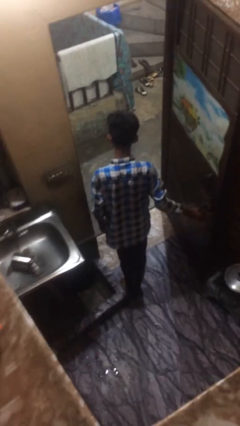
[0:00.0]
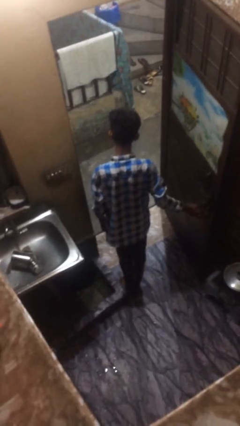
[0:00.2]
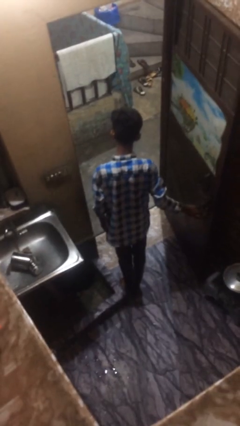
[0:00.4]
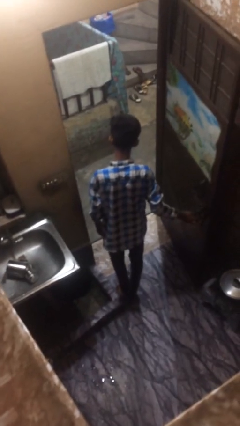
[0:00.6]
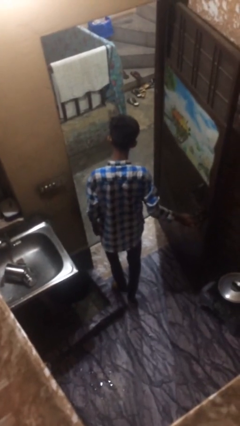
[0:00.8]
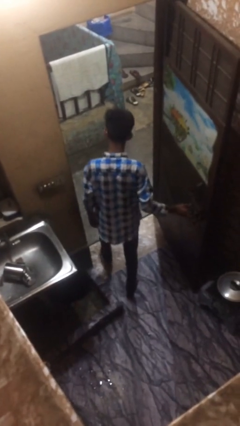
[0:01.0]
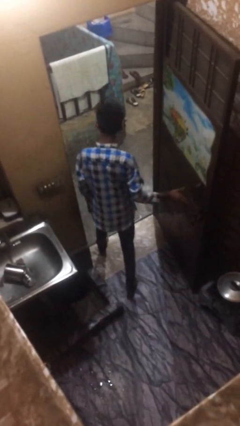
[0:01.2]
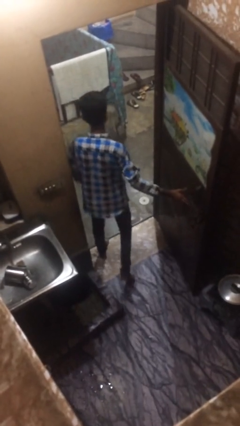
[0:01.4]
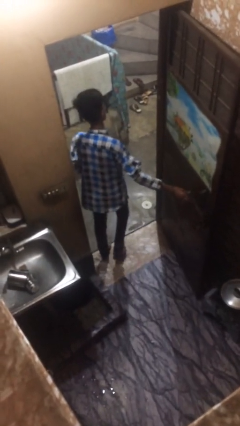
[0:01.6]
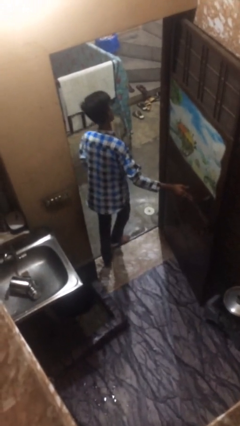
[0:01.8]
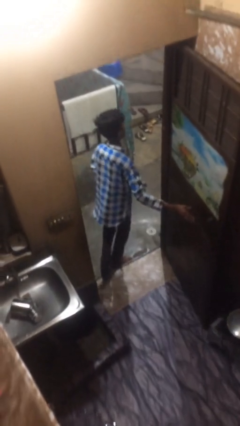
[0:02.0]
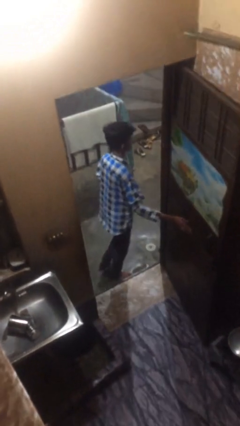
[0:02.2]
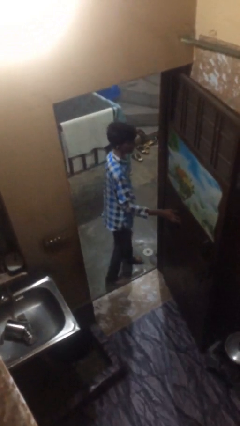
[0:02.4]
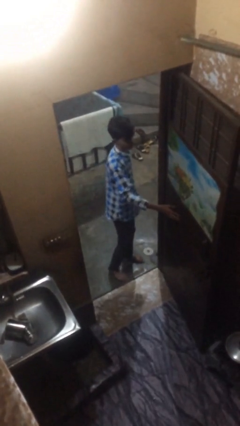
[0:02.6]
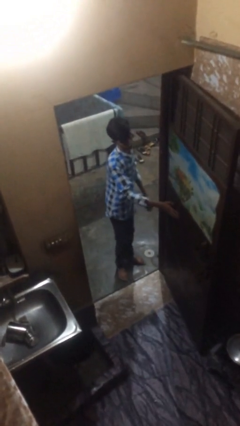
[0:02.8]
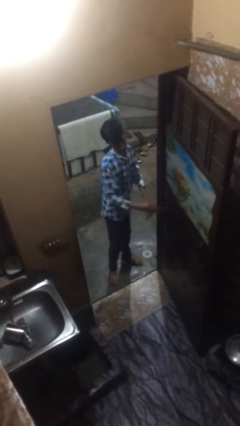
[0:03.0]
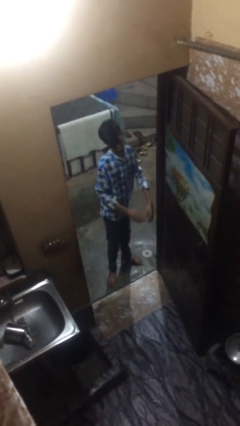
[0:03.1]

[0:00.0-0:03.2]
person exits scene through structure

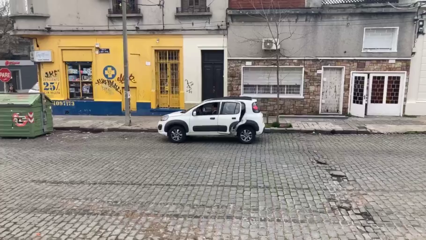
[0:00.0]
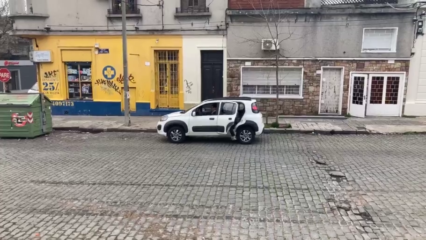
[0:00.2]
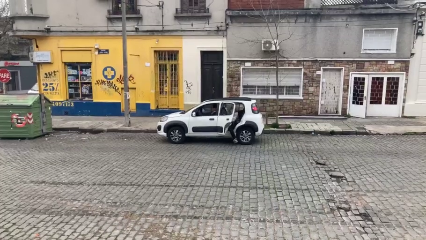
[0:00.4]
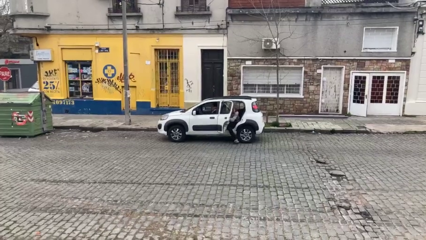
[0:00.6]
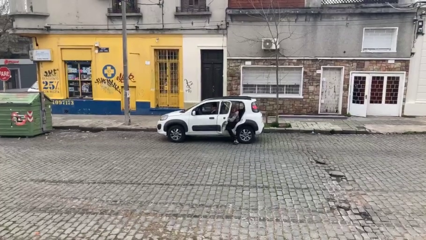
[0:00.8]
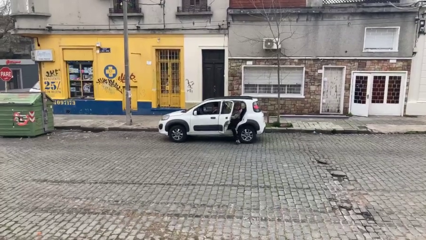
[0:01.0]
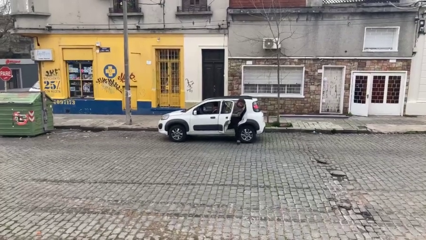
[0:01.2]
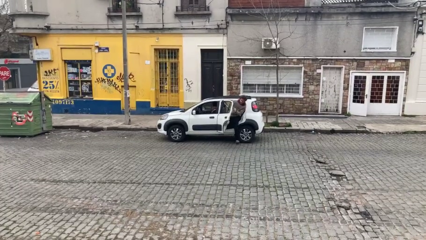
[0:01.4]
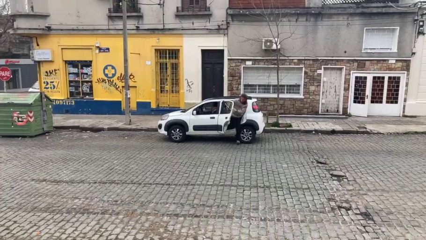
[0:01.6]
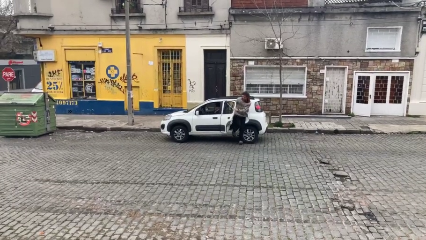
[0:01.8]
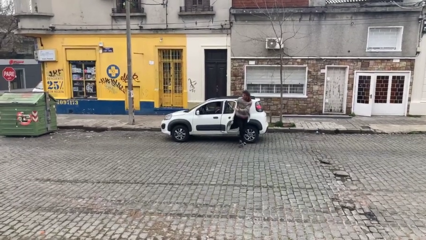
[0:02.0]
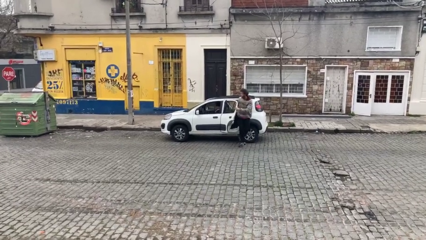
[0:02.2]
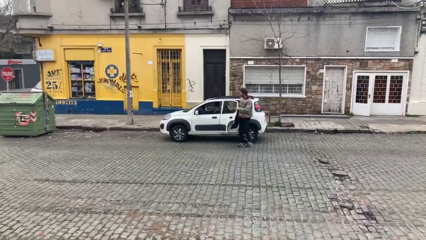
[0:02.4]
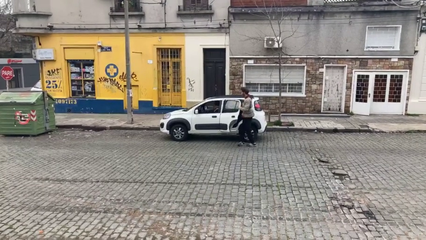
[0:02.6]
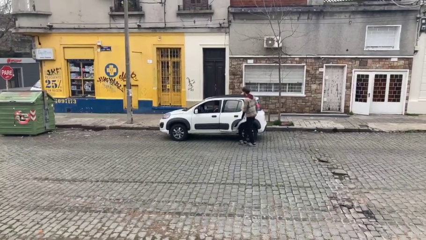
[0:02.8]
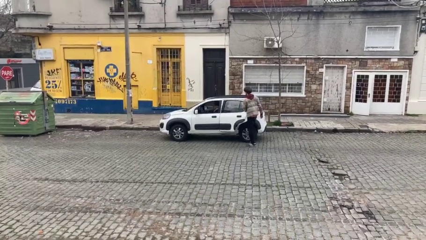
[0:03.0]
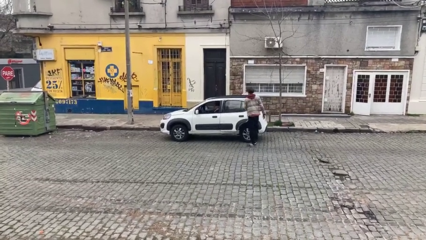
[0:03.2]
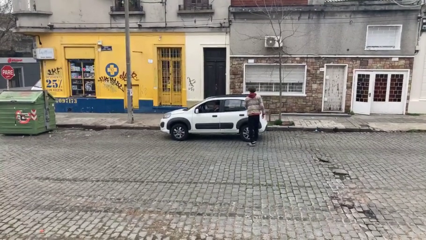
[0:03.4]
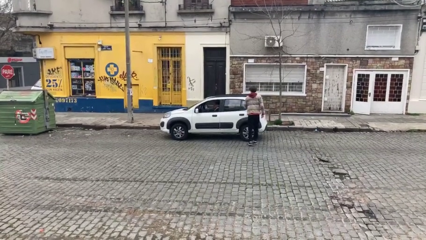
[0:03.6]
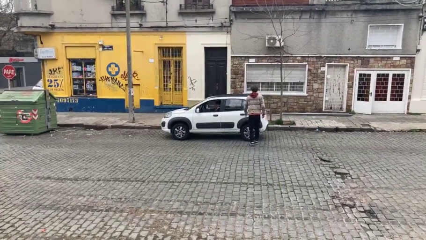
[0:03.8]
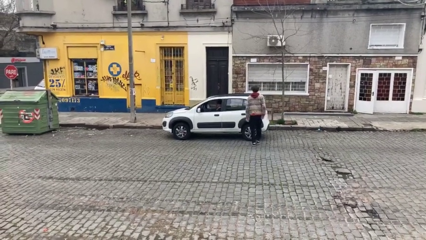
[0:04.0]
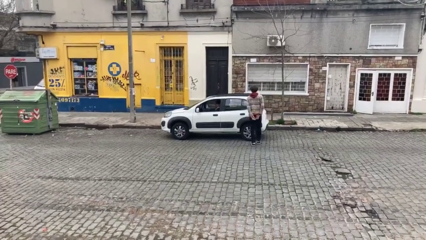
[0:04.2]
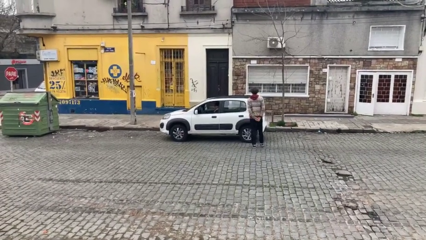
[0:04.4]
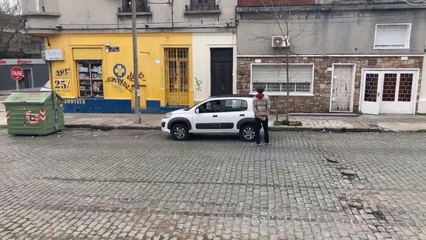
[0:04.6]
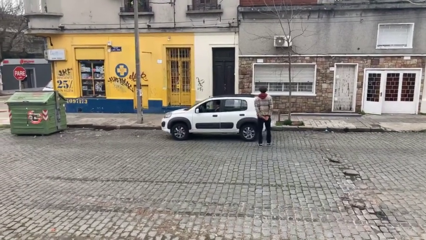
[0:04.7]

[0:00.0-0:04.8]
car drops off person

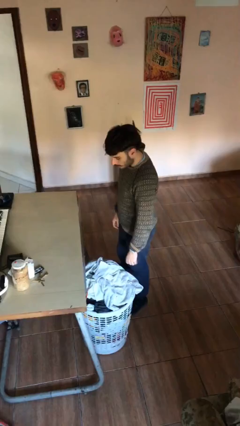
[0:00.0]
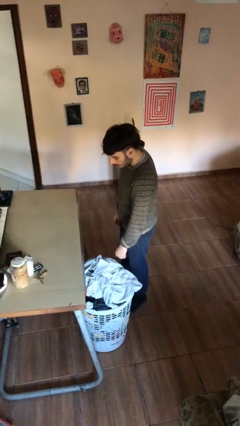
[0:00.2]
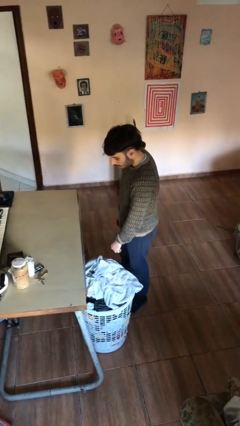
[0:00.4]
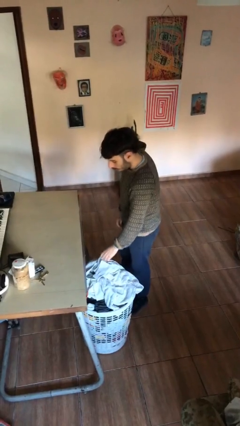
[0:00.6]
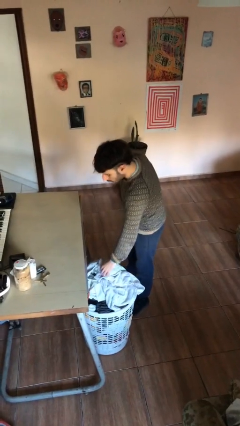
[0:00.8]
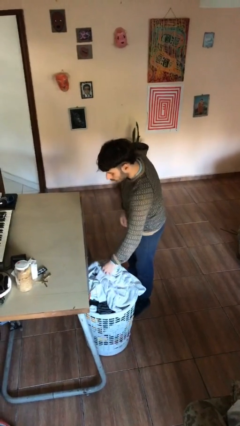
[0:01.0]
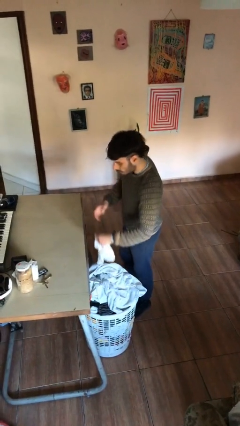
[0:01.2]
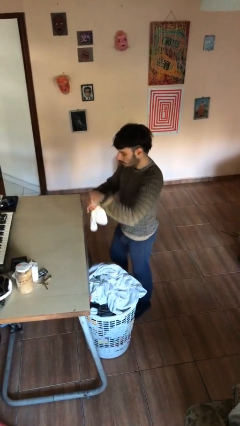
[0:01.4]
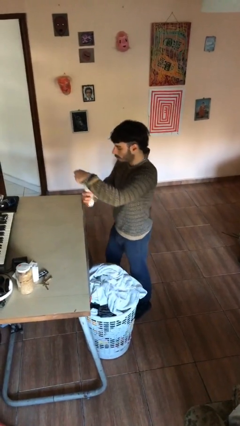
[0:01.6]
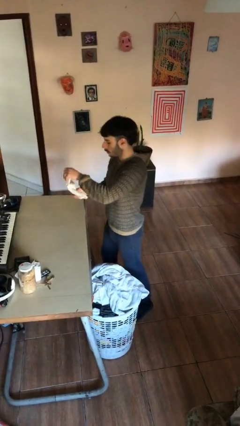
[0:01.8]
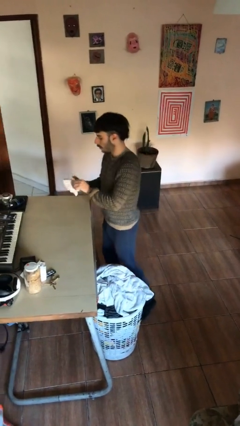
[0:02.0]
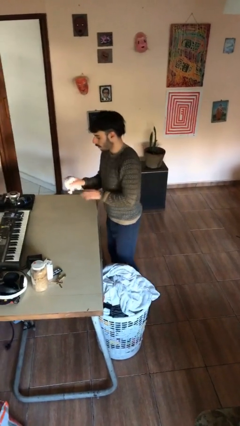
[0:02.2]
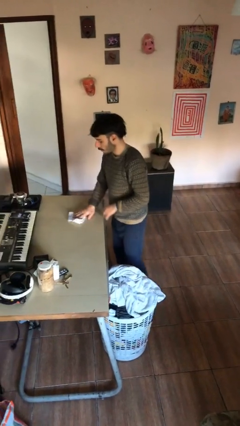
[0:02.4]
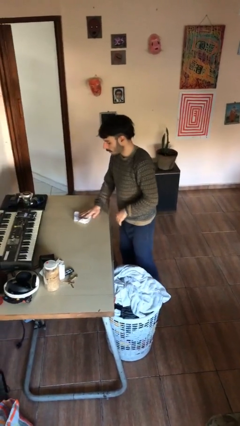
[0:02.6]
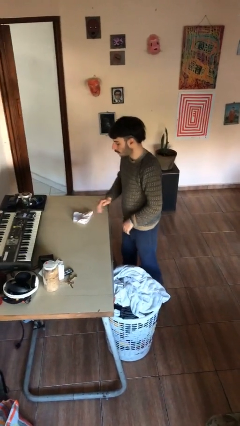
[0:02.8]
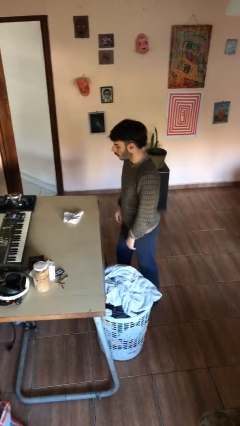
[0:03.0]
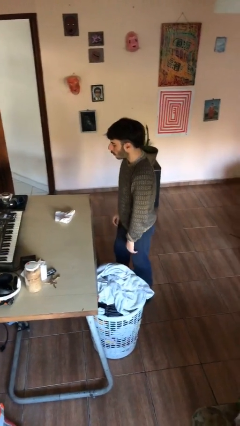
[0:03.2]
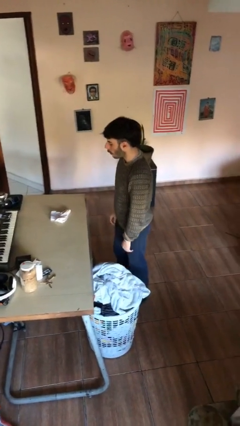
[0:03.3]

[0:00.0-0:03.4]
person folds socks

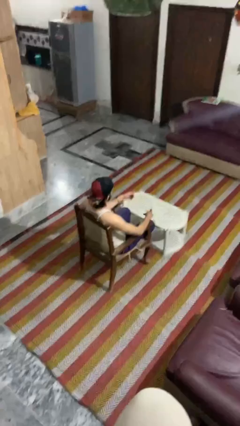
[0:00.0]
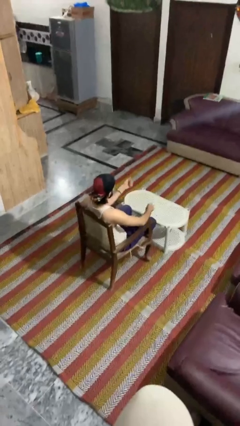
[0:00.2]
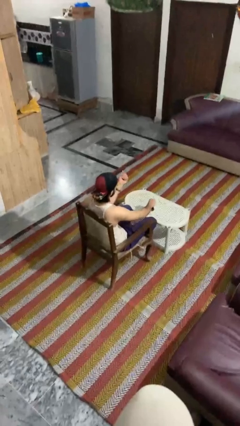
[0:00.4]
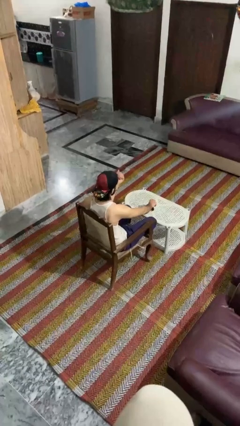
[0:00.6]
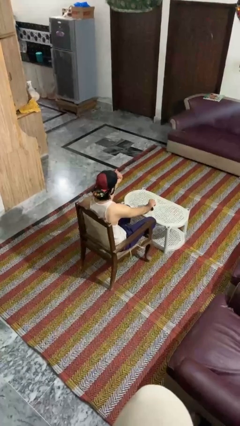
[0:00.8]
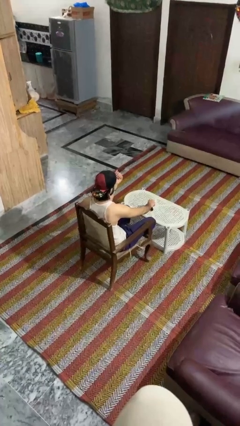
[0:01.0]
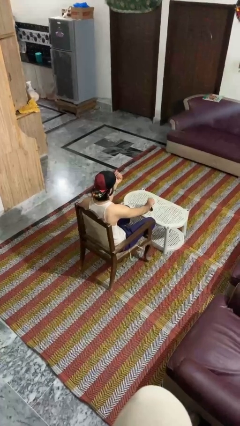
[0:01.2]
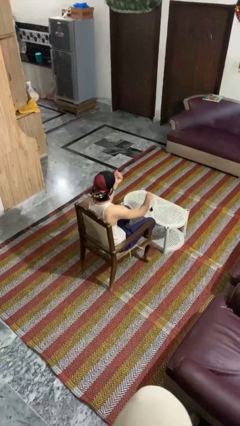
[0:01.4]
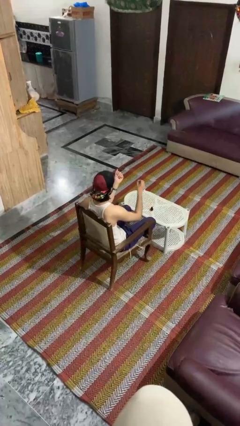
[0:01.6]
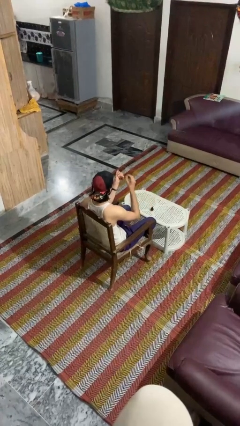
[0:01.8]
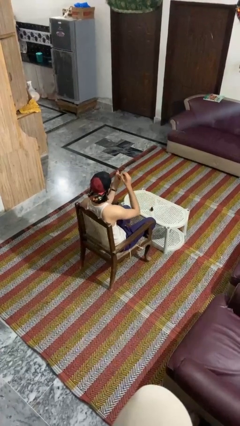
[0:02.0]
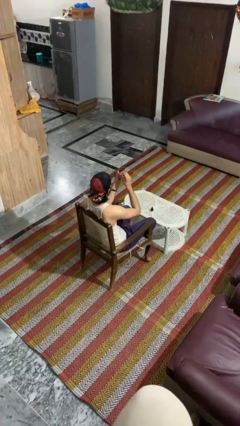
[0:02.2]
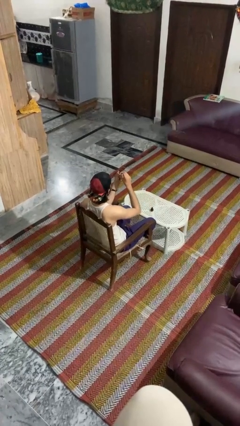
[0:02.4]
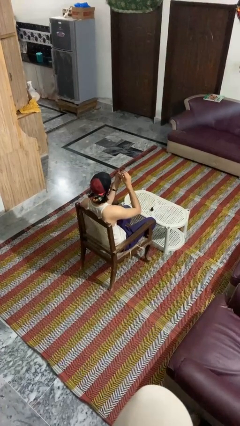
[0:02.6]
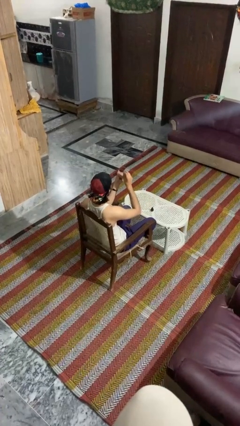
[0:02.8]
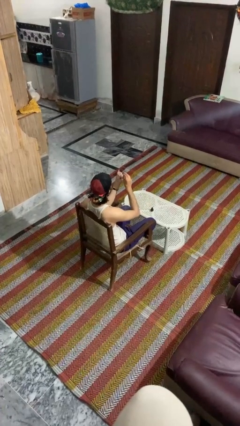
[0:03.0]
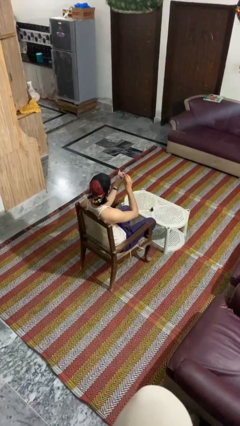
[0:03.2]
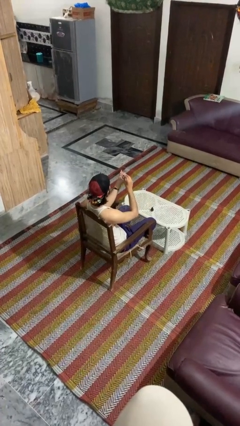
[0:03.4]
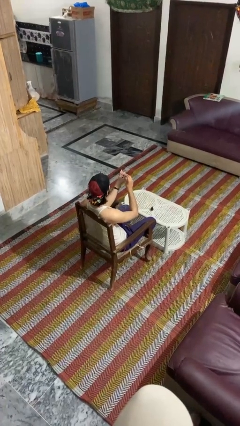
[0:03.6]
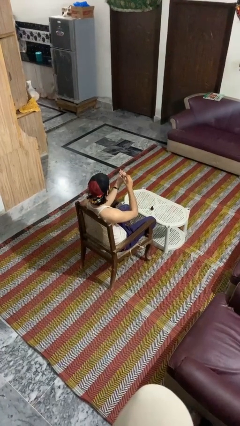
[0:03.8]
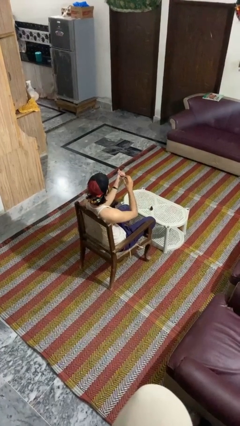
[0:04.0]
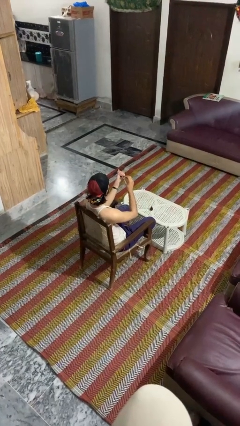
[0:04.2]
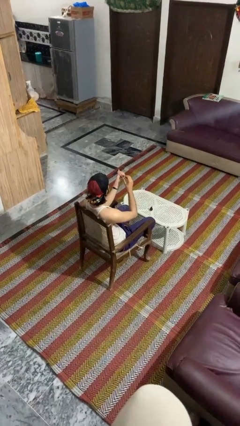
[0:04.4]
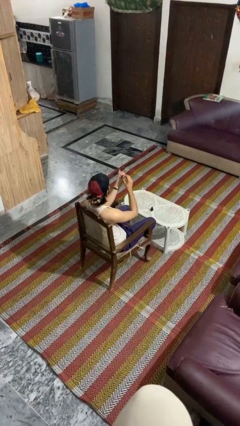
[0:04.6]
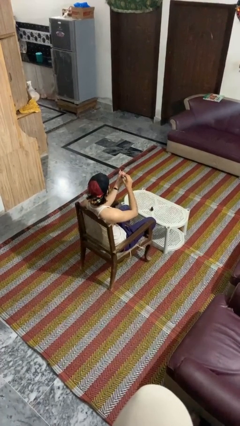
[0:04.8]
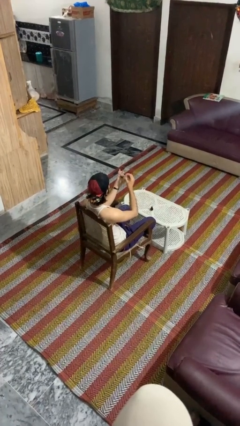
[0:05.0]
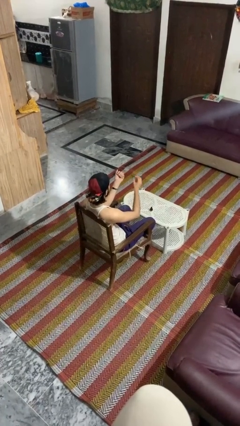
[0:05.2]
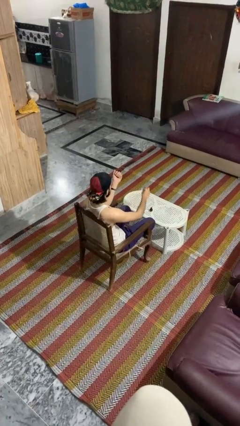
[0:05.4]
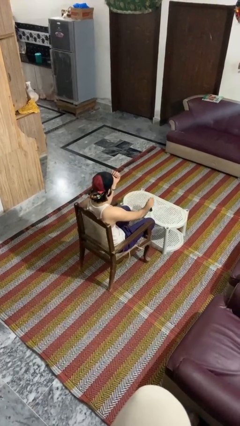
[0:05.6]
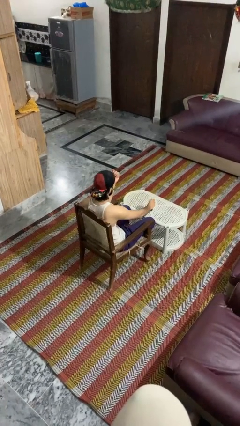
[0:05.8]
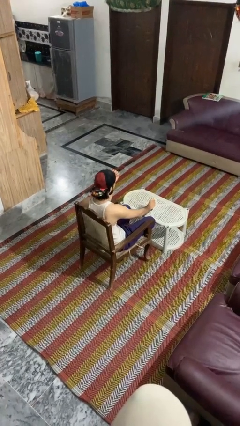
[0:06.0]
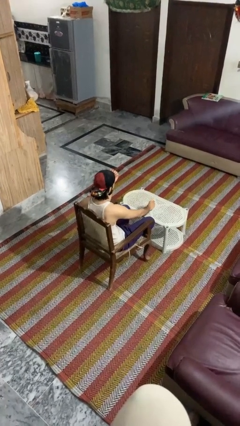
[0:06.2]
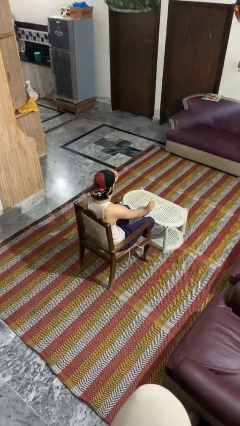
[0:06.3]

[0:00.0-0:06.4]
person paints fingernails

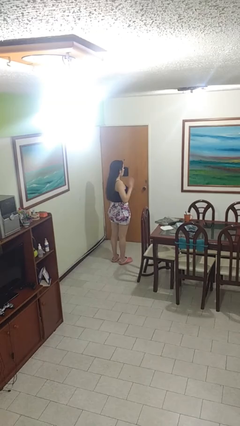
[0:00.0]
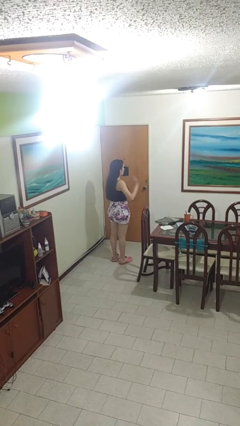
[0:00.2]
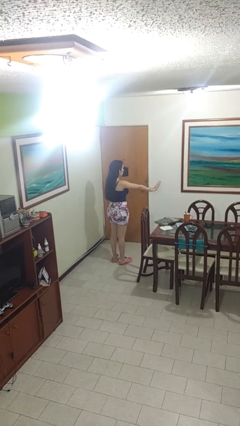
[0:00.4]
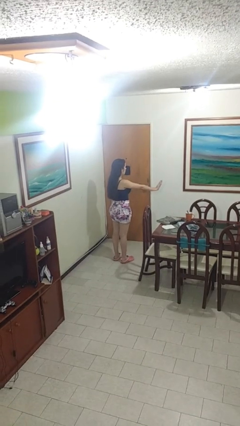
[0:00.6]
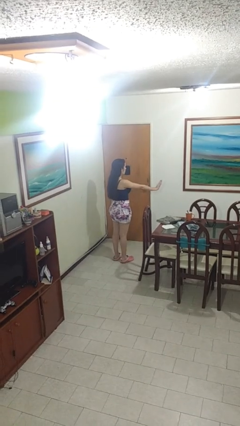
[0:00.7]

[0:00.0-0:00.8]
person gestures stop
